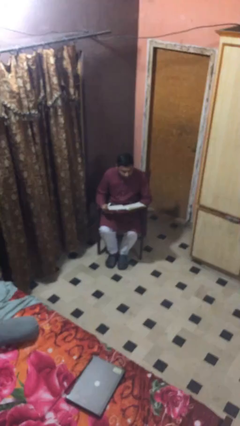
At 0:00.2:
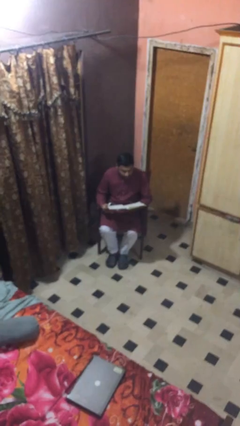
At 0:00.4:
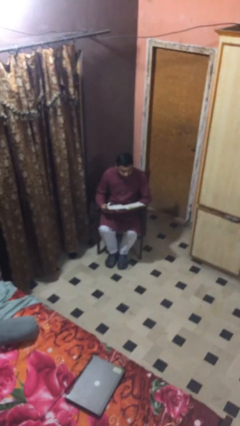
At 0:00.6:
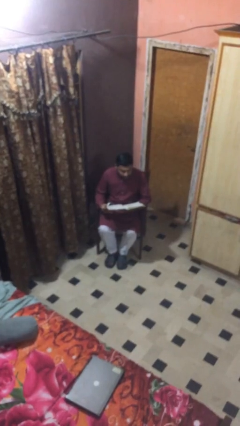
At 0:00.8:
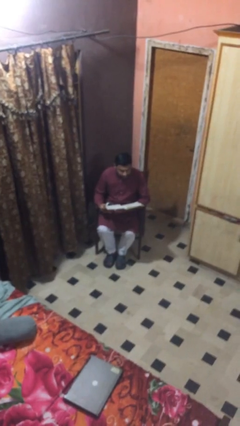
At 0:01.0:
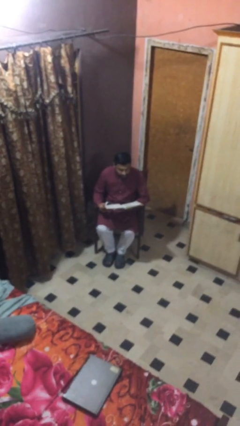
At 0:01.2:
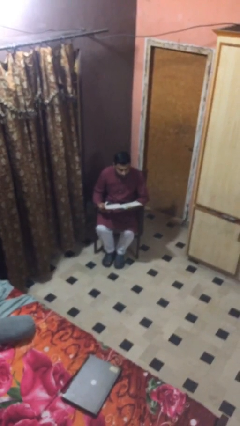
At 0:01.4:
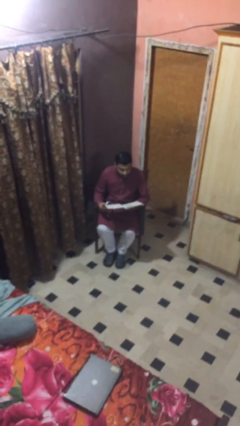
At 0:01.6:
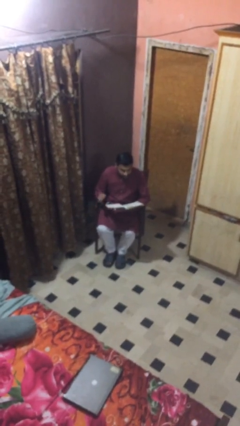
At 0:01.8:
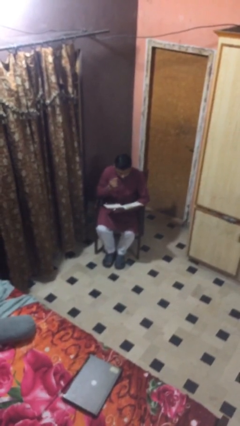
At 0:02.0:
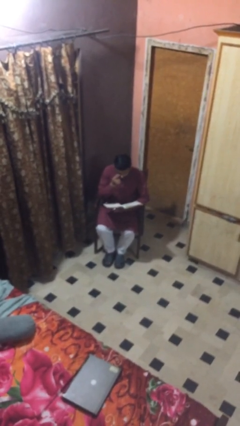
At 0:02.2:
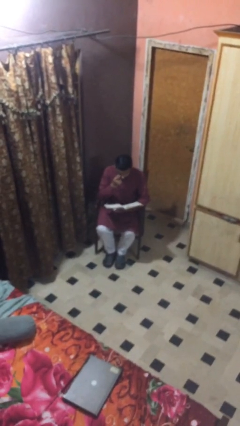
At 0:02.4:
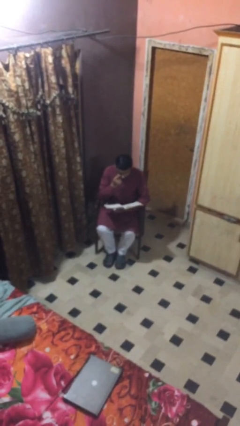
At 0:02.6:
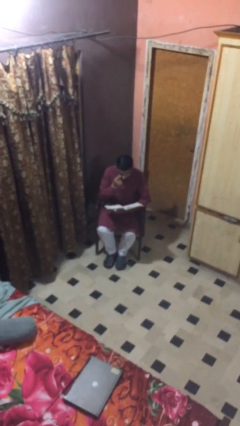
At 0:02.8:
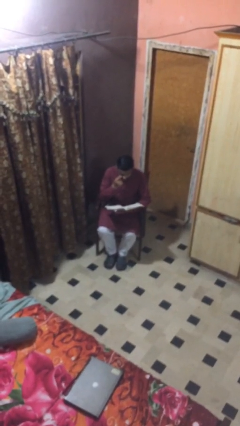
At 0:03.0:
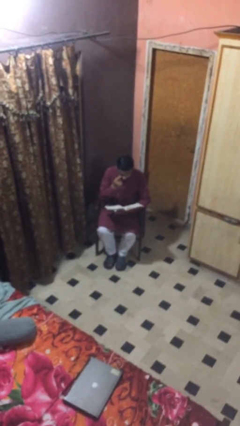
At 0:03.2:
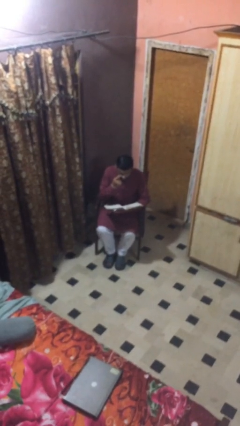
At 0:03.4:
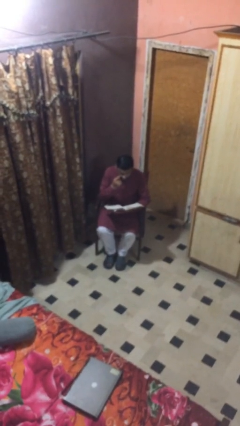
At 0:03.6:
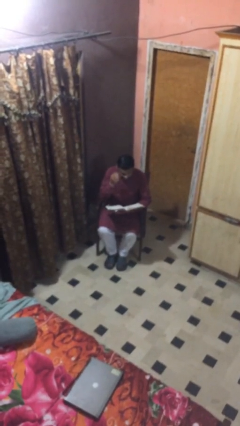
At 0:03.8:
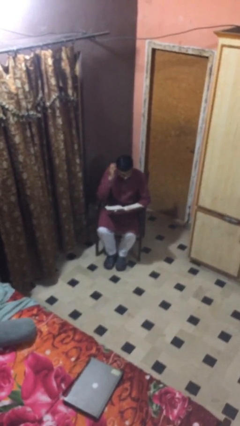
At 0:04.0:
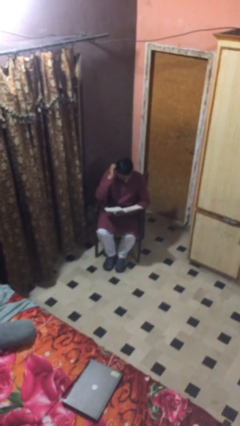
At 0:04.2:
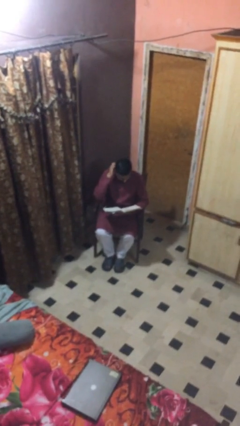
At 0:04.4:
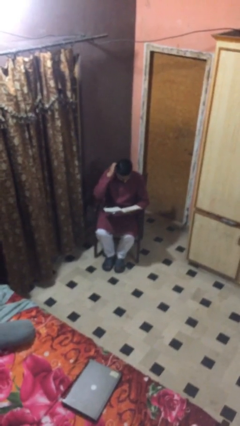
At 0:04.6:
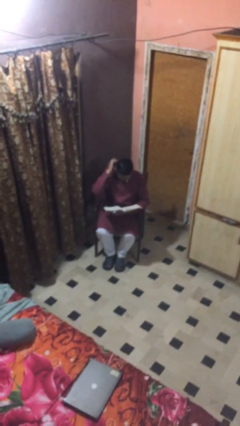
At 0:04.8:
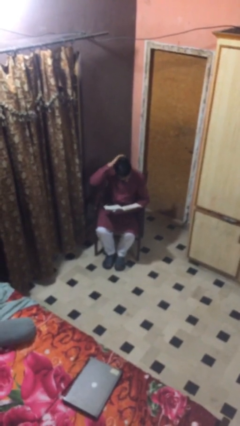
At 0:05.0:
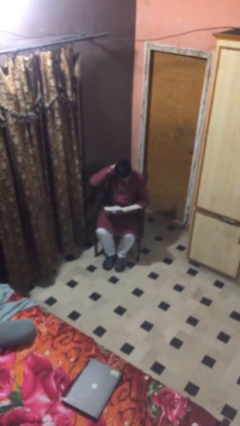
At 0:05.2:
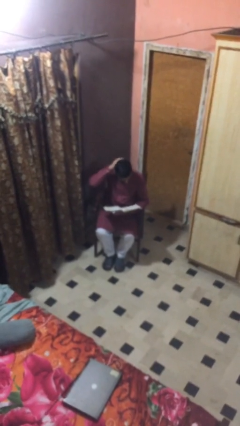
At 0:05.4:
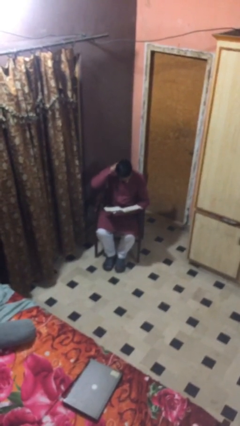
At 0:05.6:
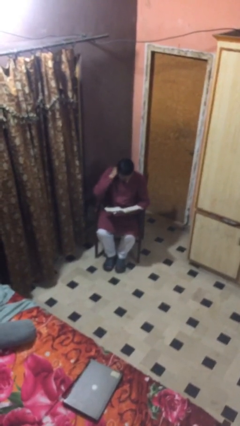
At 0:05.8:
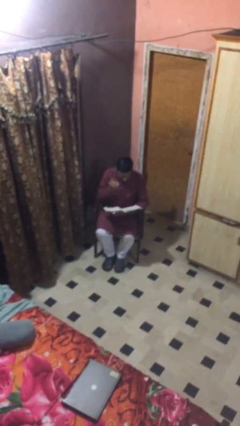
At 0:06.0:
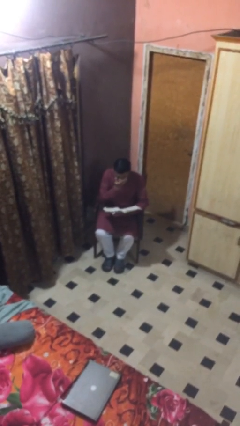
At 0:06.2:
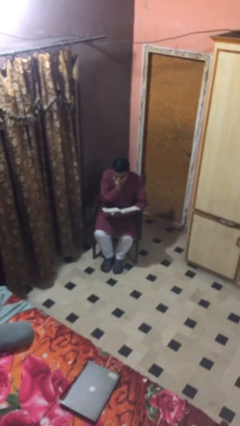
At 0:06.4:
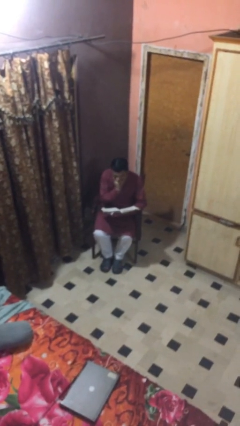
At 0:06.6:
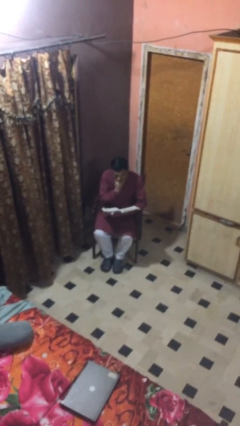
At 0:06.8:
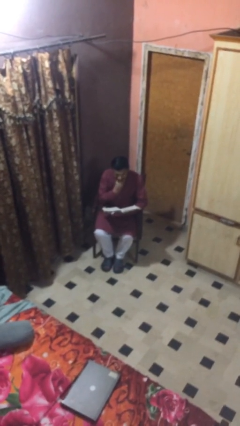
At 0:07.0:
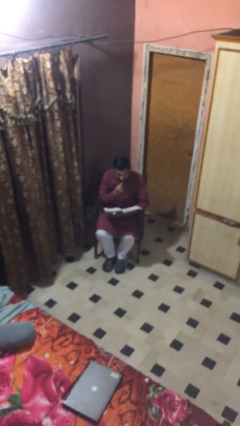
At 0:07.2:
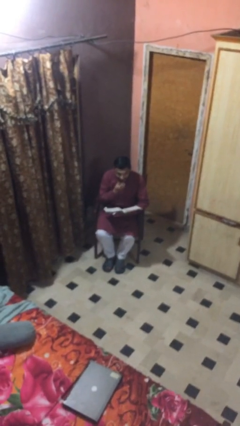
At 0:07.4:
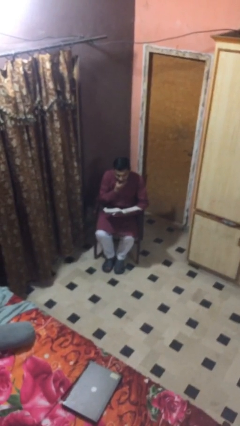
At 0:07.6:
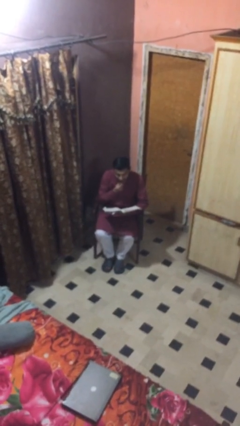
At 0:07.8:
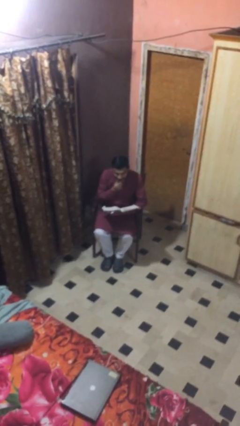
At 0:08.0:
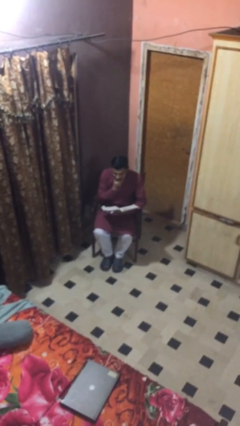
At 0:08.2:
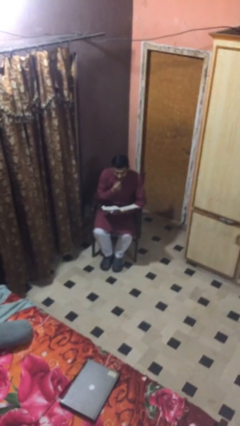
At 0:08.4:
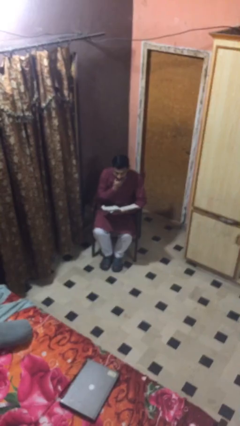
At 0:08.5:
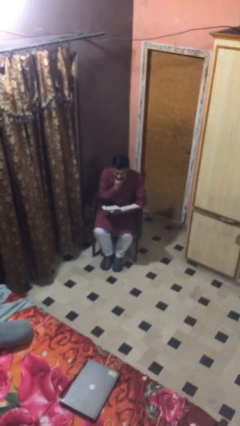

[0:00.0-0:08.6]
person reads document

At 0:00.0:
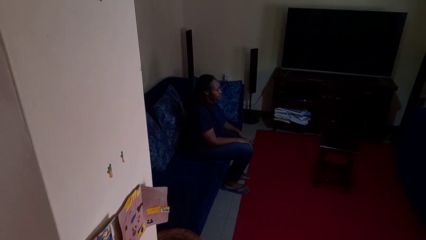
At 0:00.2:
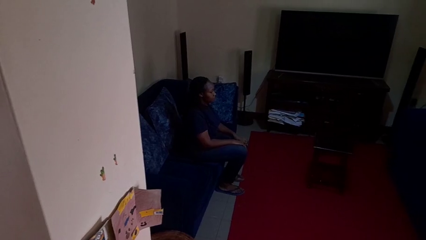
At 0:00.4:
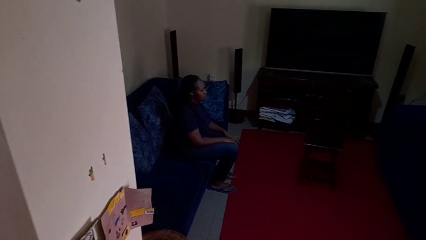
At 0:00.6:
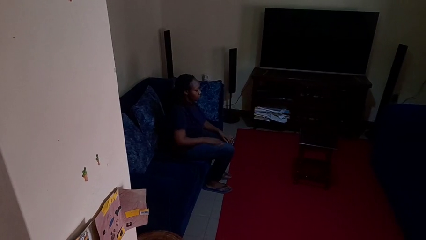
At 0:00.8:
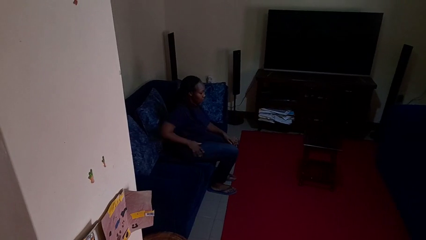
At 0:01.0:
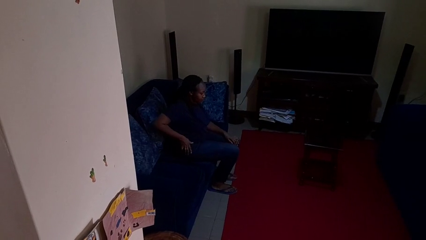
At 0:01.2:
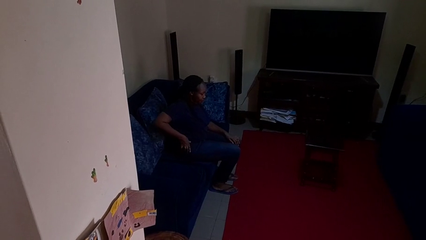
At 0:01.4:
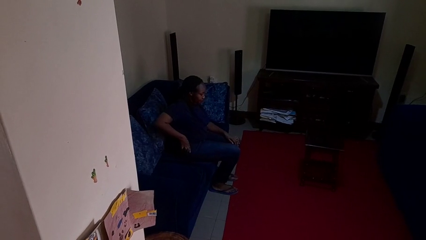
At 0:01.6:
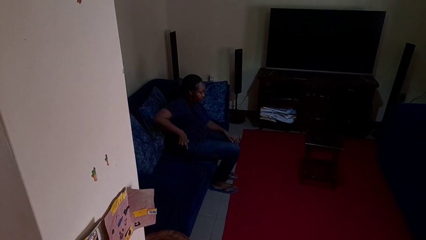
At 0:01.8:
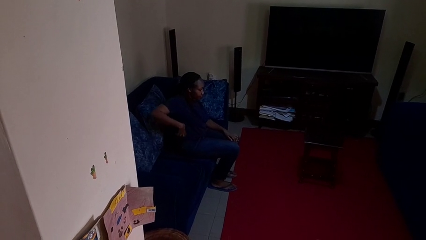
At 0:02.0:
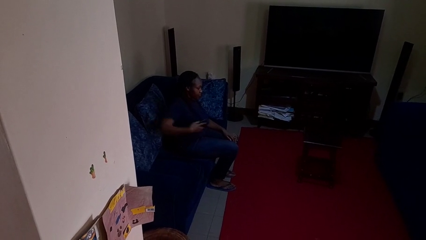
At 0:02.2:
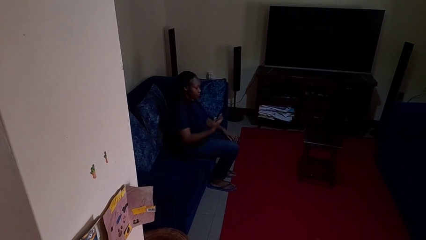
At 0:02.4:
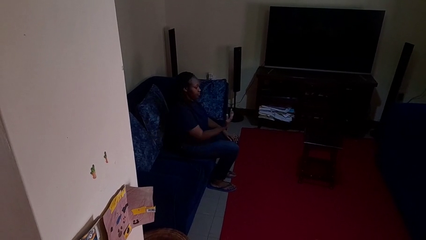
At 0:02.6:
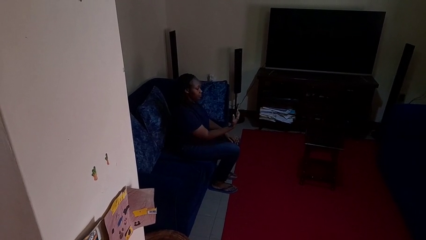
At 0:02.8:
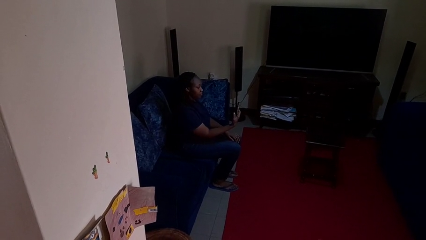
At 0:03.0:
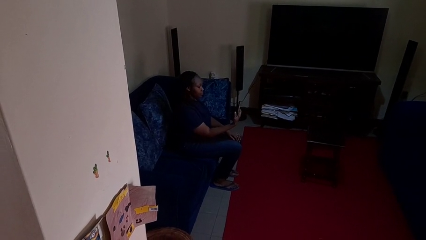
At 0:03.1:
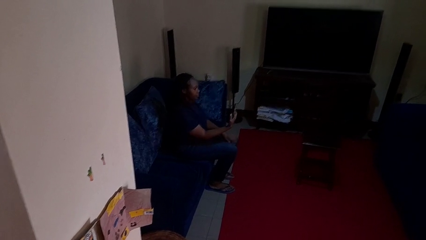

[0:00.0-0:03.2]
person takes phone from pocket

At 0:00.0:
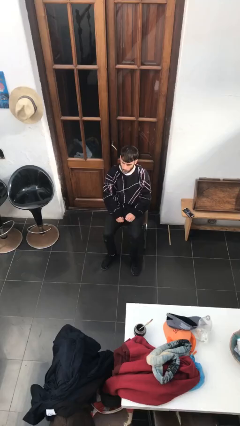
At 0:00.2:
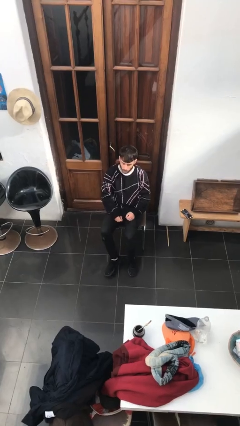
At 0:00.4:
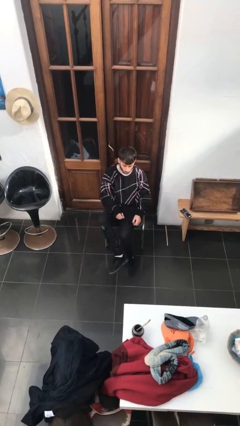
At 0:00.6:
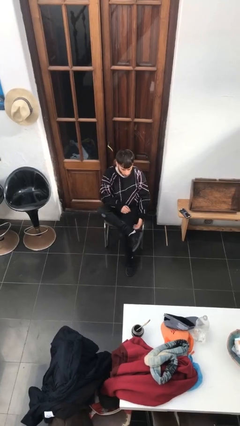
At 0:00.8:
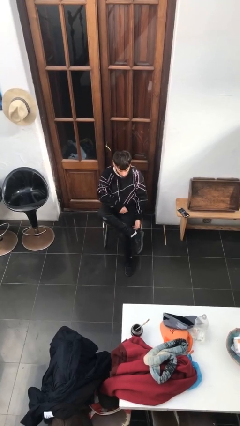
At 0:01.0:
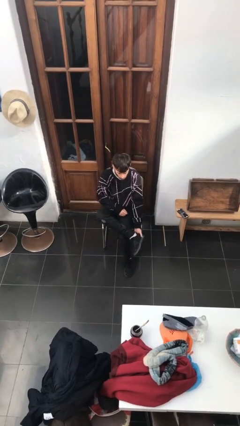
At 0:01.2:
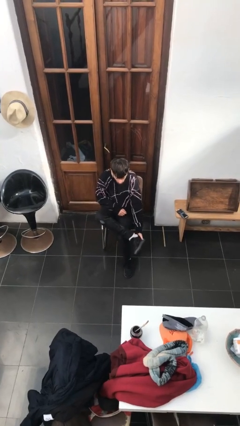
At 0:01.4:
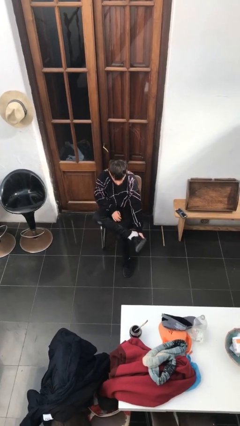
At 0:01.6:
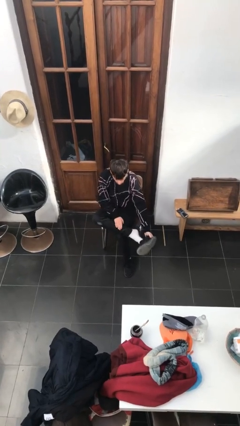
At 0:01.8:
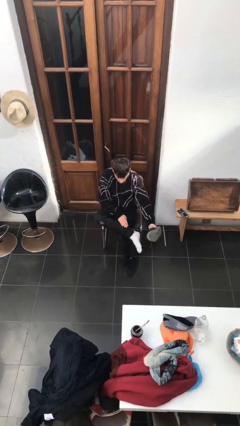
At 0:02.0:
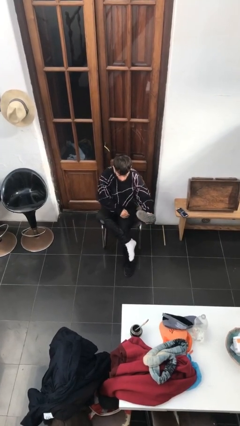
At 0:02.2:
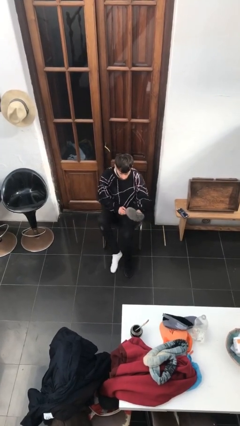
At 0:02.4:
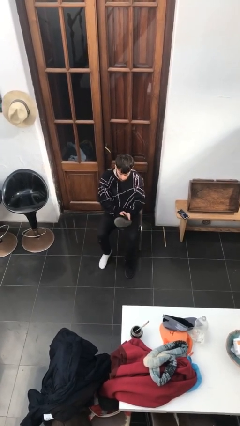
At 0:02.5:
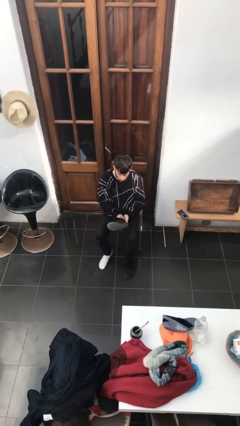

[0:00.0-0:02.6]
person takes off shoes

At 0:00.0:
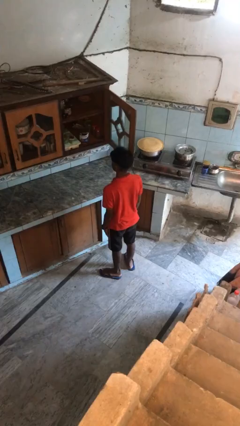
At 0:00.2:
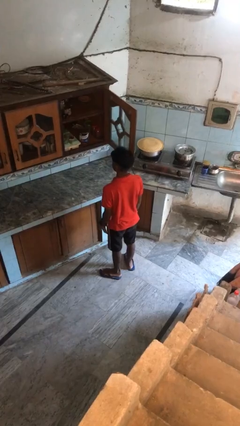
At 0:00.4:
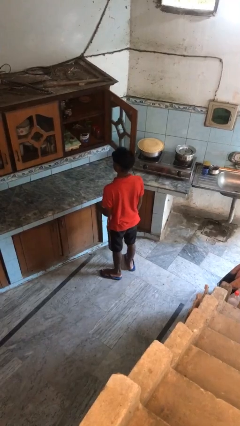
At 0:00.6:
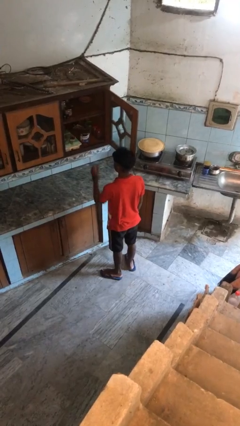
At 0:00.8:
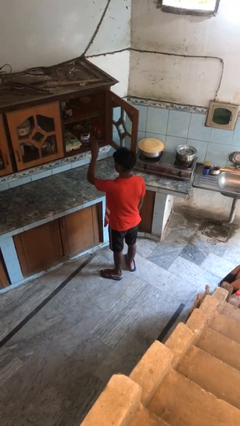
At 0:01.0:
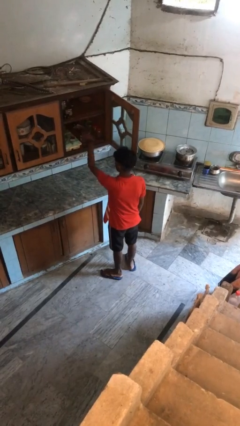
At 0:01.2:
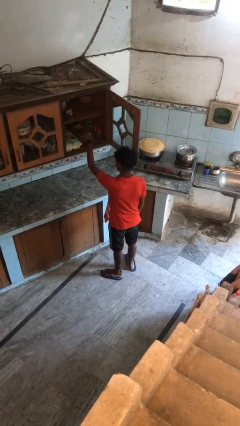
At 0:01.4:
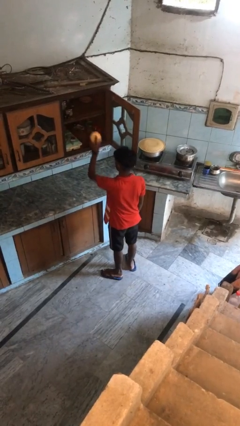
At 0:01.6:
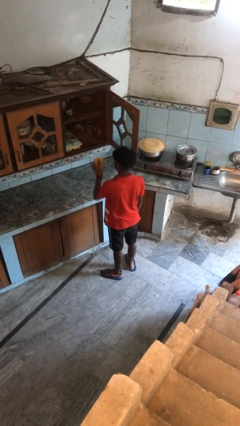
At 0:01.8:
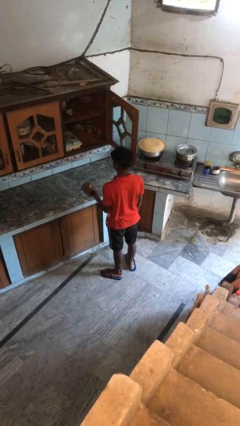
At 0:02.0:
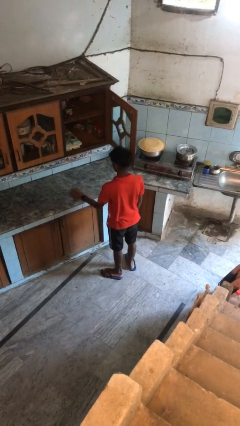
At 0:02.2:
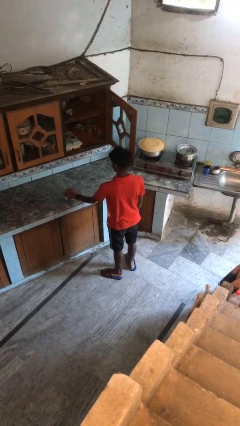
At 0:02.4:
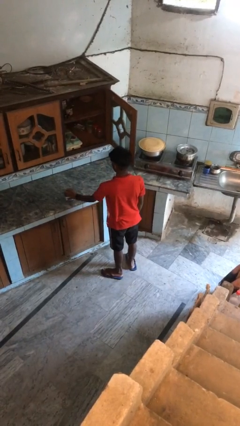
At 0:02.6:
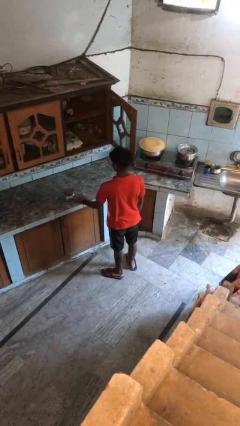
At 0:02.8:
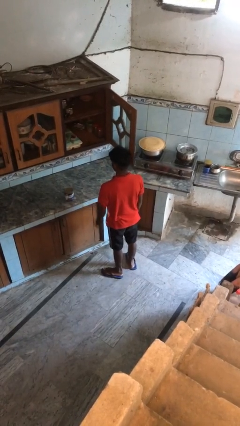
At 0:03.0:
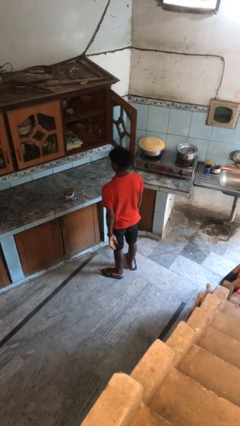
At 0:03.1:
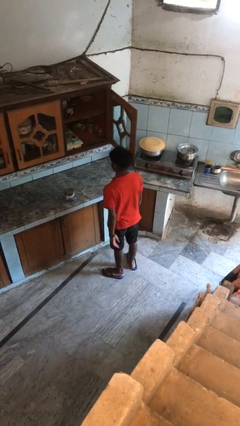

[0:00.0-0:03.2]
person takes object from cabinet
